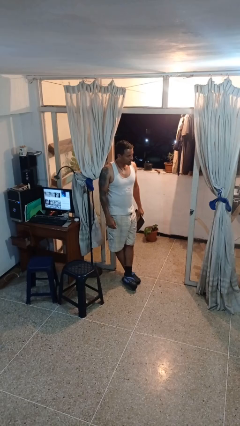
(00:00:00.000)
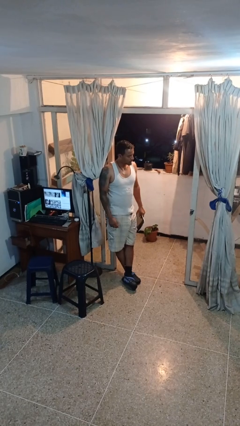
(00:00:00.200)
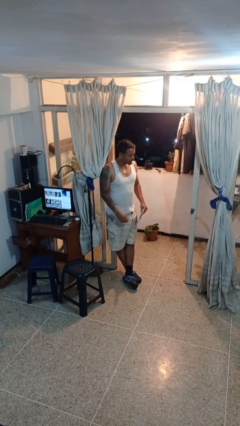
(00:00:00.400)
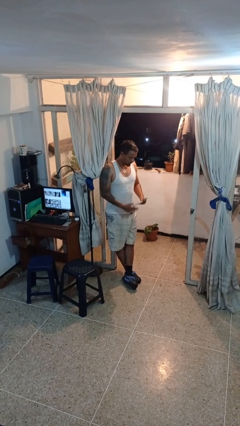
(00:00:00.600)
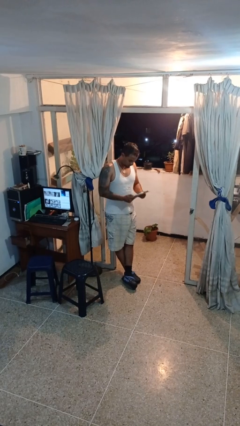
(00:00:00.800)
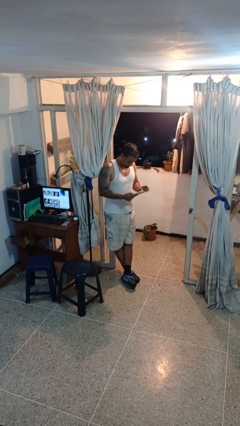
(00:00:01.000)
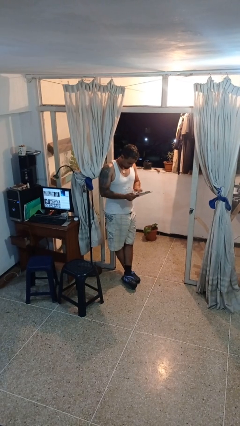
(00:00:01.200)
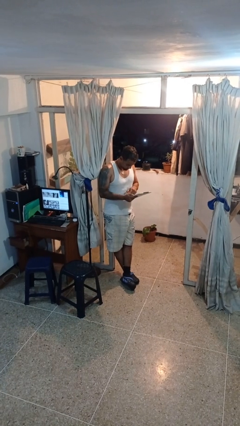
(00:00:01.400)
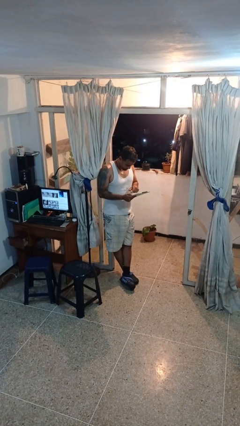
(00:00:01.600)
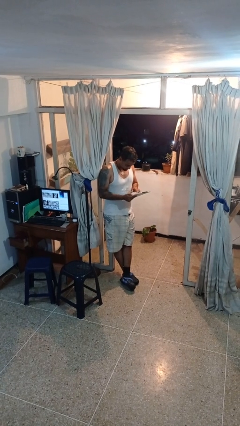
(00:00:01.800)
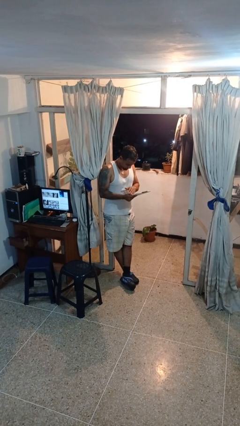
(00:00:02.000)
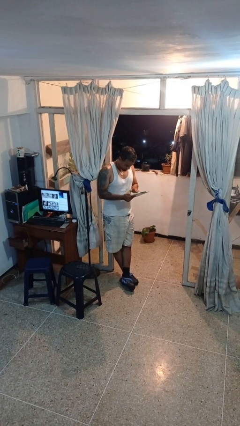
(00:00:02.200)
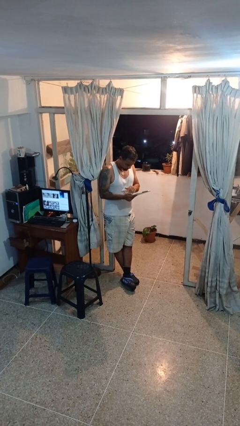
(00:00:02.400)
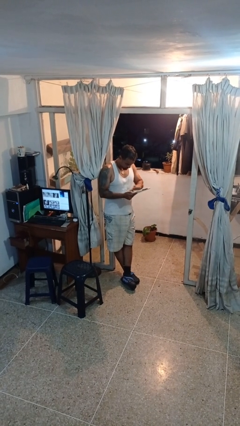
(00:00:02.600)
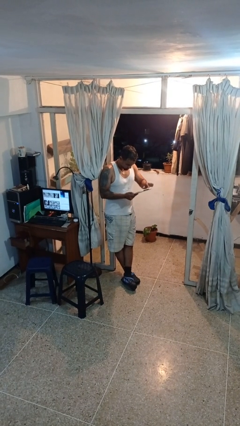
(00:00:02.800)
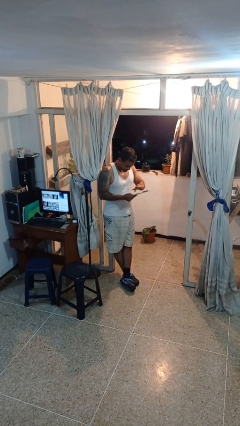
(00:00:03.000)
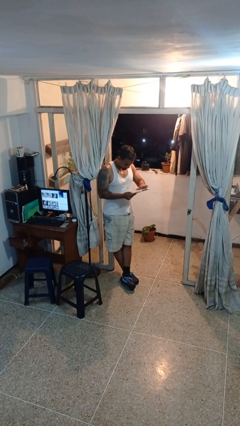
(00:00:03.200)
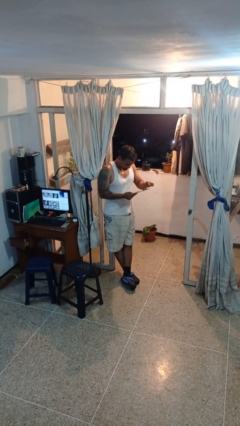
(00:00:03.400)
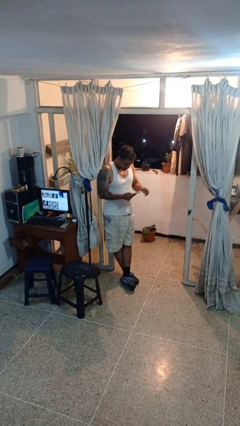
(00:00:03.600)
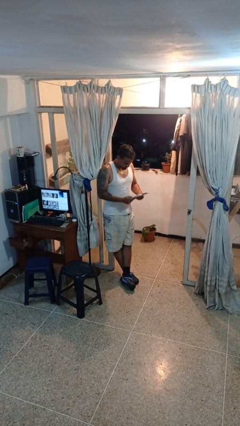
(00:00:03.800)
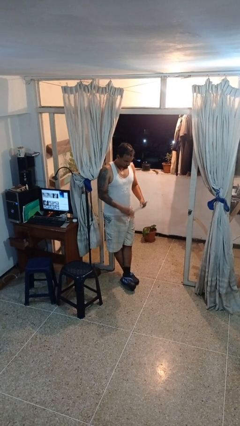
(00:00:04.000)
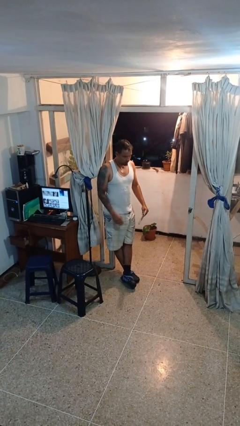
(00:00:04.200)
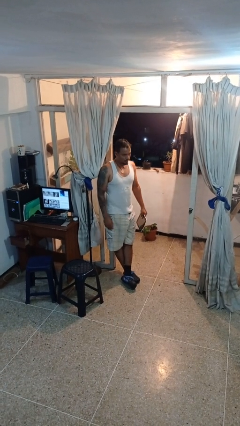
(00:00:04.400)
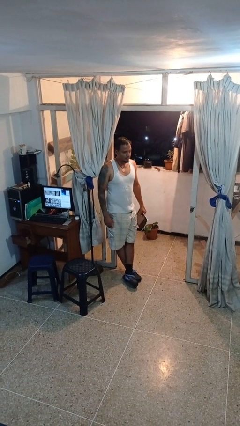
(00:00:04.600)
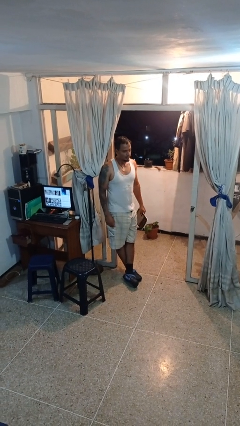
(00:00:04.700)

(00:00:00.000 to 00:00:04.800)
person interacts with tablet

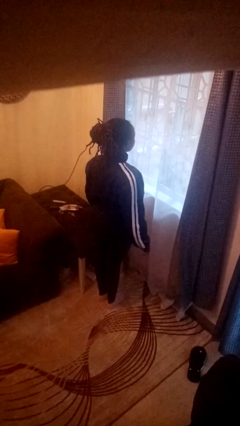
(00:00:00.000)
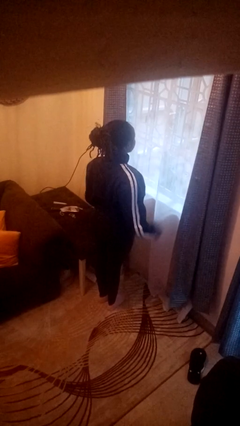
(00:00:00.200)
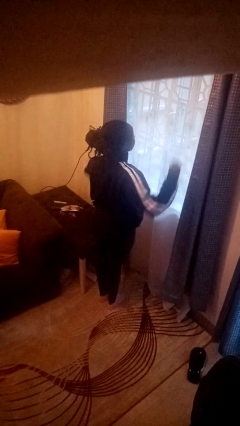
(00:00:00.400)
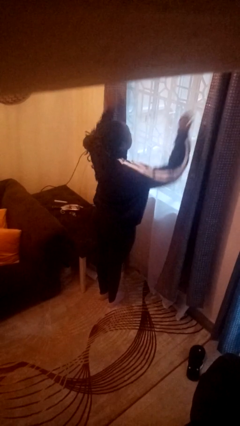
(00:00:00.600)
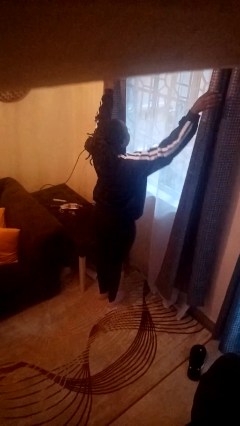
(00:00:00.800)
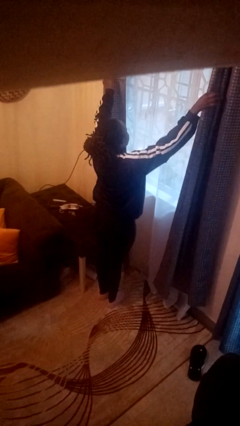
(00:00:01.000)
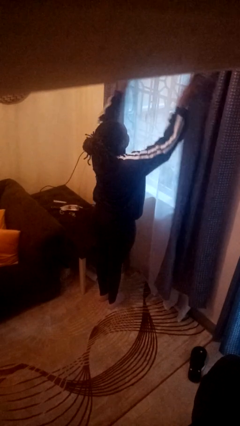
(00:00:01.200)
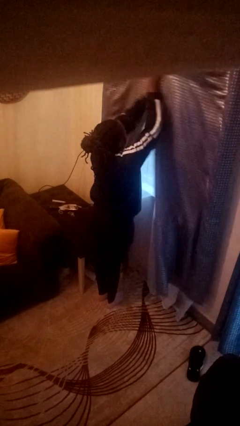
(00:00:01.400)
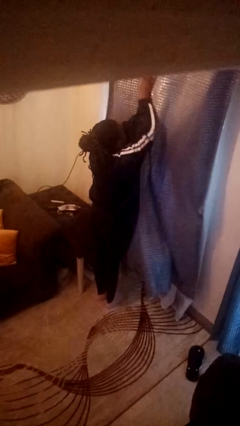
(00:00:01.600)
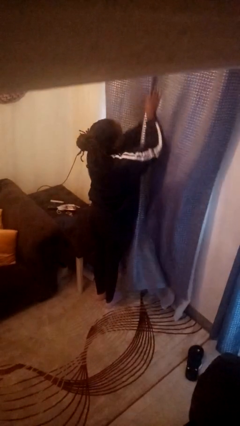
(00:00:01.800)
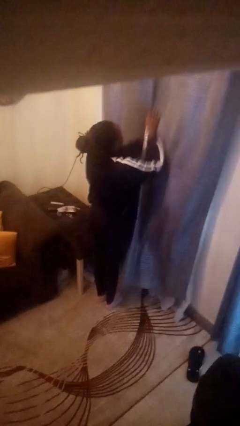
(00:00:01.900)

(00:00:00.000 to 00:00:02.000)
person closes curtains

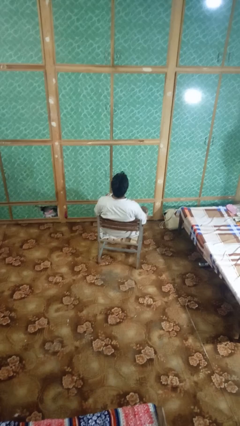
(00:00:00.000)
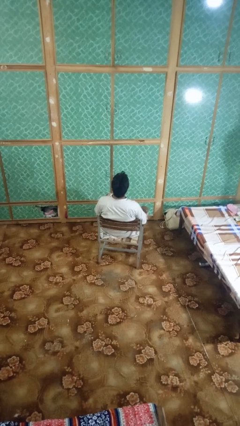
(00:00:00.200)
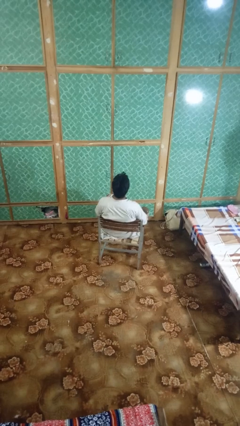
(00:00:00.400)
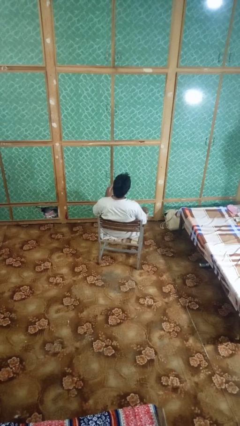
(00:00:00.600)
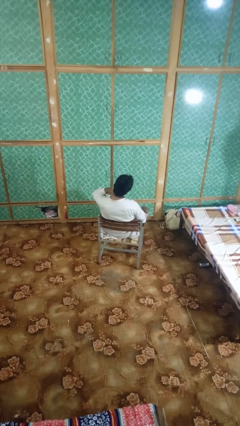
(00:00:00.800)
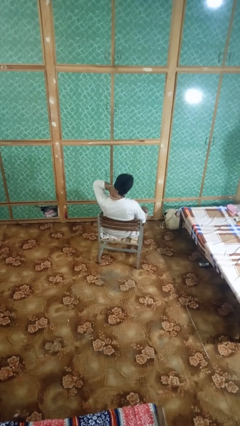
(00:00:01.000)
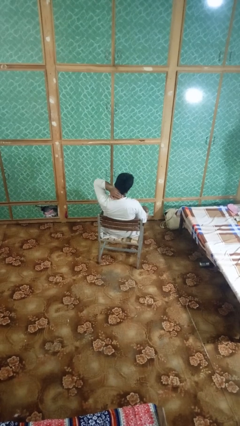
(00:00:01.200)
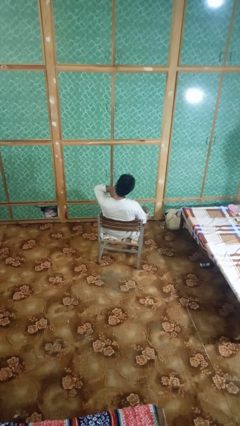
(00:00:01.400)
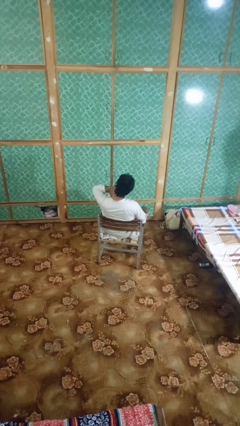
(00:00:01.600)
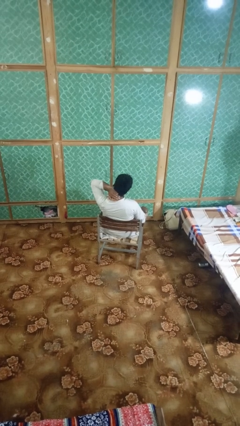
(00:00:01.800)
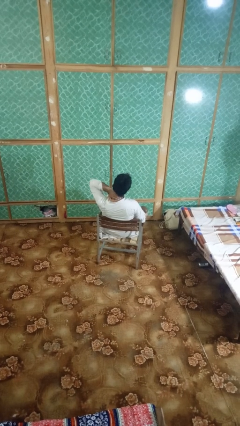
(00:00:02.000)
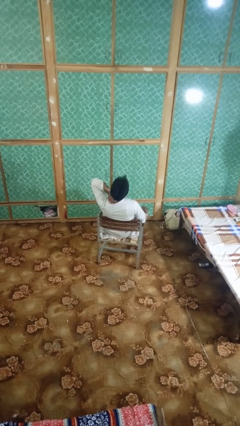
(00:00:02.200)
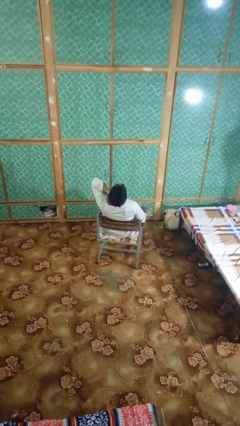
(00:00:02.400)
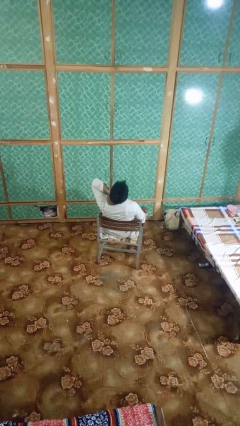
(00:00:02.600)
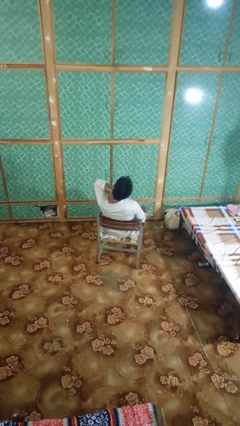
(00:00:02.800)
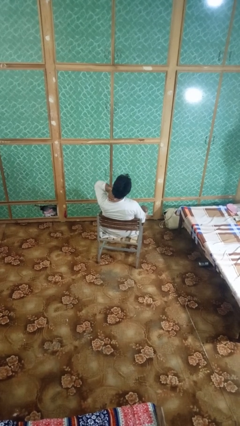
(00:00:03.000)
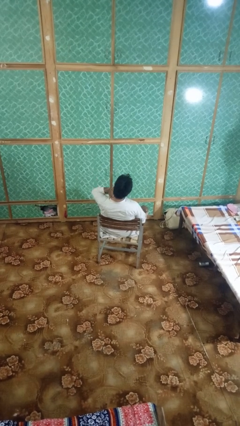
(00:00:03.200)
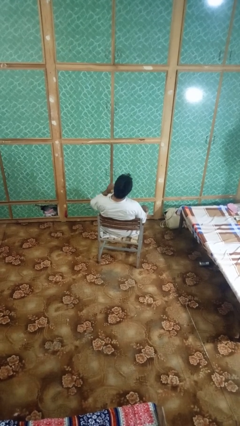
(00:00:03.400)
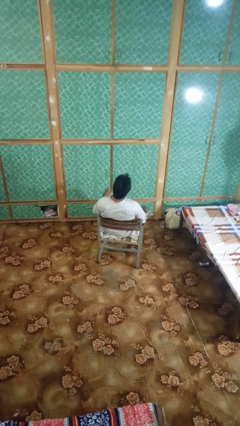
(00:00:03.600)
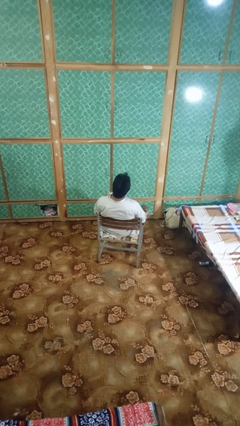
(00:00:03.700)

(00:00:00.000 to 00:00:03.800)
person rubs neck

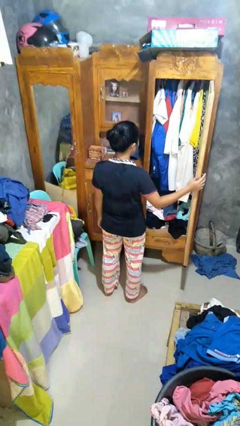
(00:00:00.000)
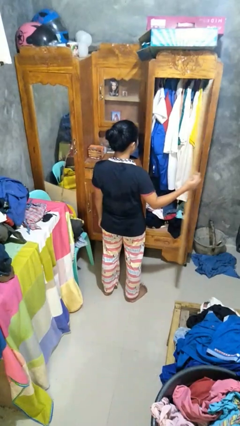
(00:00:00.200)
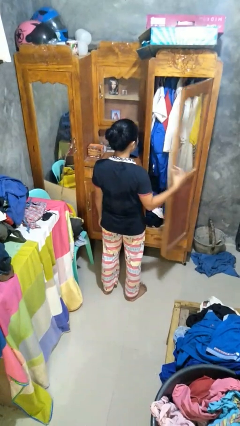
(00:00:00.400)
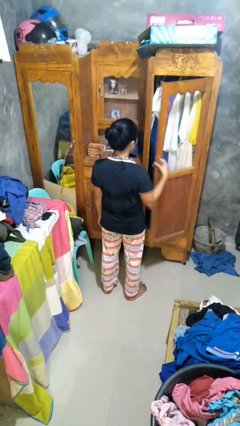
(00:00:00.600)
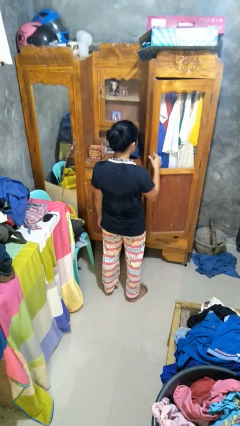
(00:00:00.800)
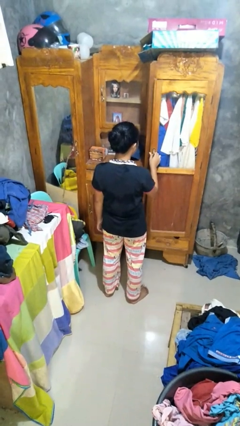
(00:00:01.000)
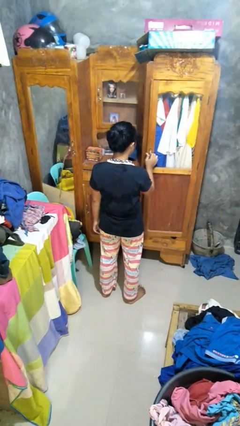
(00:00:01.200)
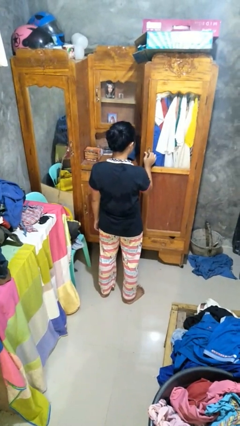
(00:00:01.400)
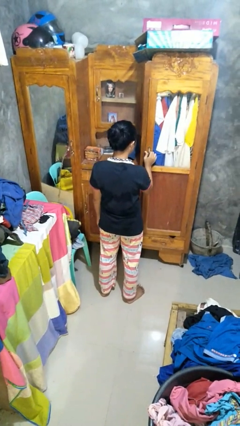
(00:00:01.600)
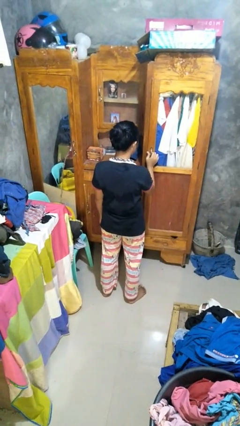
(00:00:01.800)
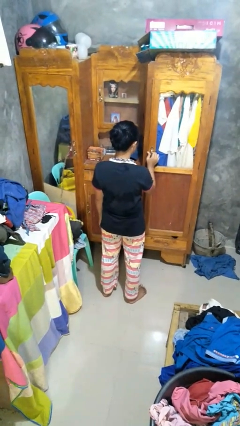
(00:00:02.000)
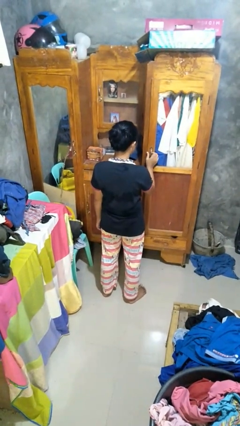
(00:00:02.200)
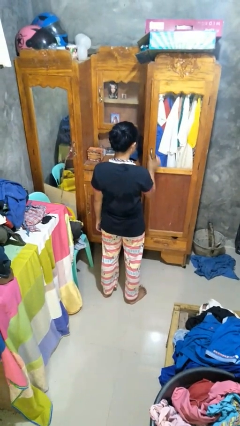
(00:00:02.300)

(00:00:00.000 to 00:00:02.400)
person closes closet door

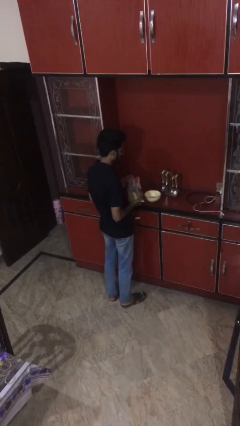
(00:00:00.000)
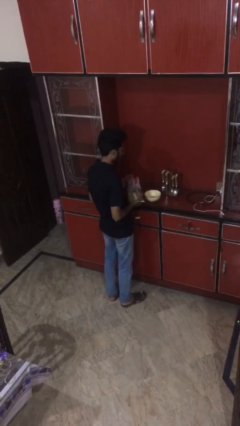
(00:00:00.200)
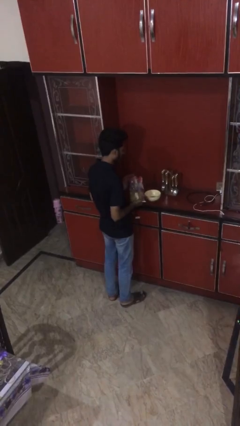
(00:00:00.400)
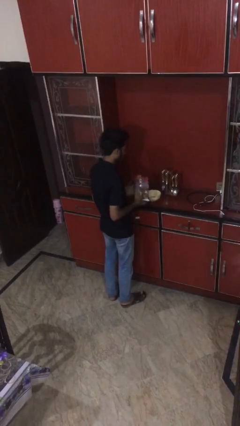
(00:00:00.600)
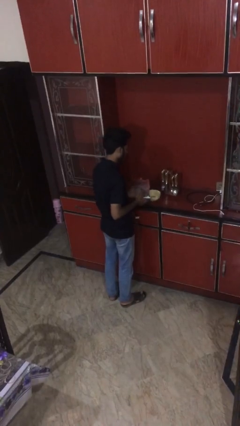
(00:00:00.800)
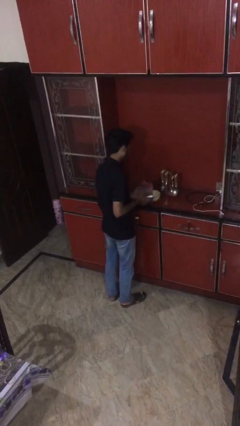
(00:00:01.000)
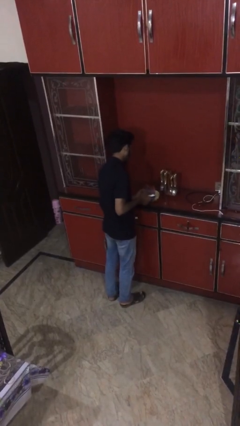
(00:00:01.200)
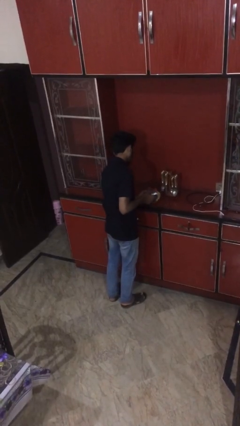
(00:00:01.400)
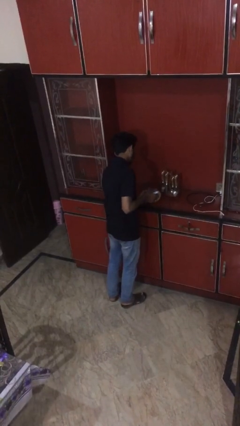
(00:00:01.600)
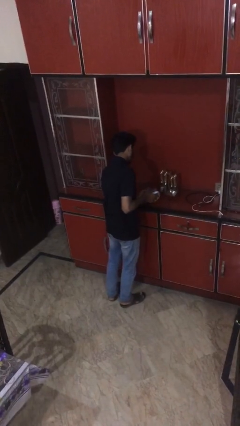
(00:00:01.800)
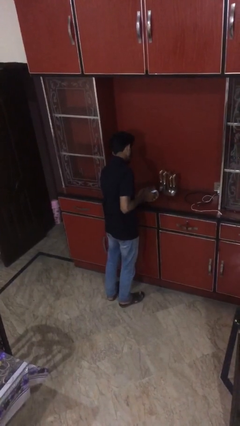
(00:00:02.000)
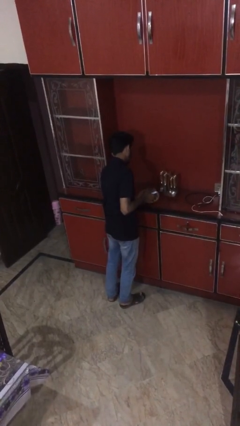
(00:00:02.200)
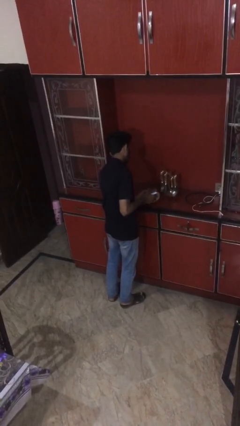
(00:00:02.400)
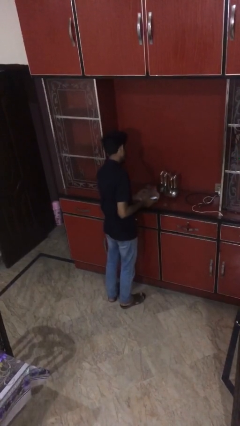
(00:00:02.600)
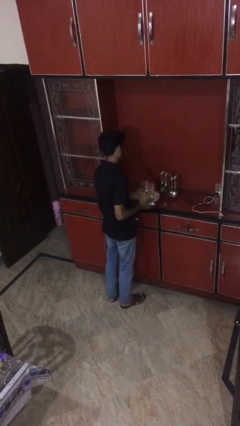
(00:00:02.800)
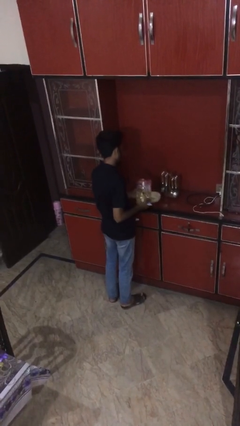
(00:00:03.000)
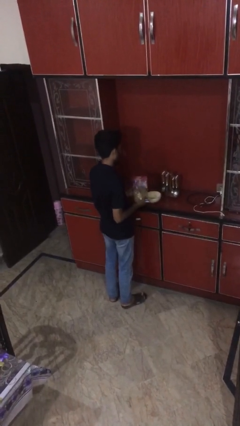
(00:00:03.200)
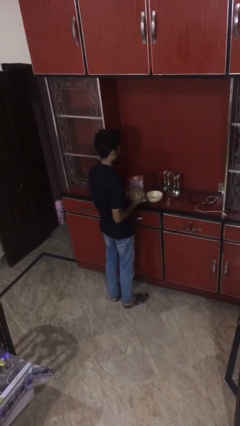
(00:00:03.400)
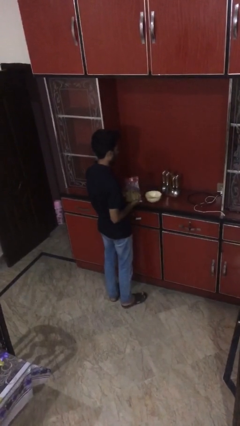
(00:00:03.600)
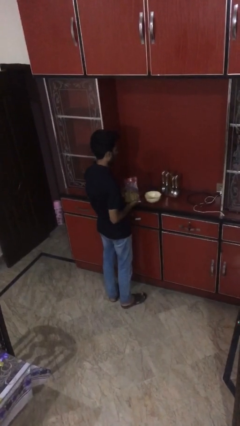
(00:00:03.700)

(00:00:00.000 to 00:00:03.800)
person pours into bowl

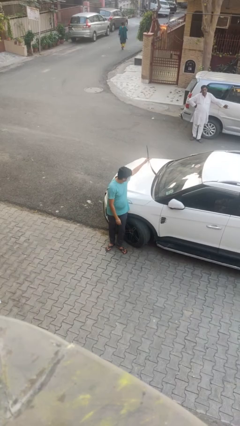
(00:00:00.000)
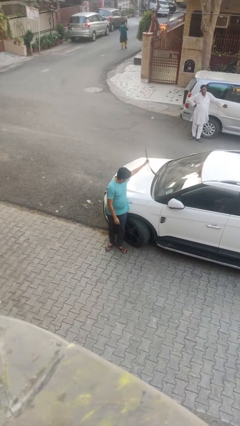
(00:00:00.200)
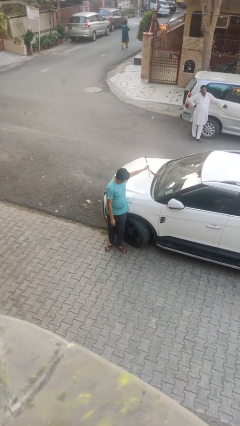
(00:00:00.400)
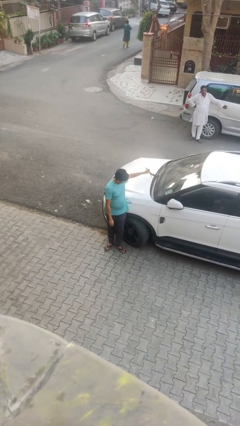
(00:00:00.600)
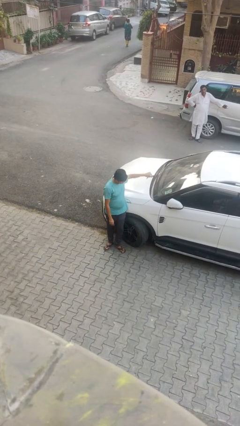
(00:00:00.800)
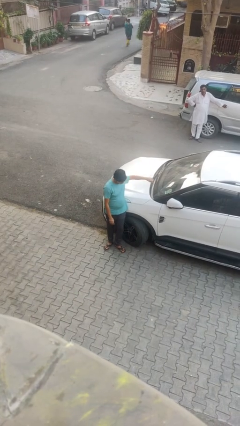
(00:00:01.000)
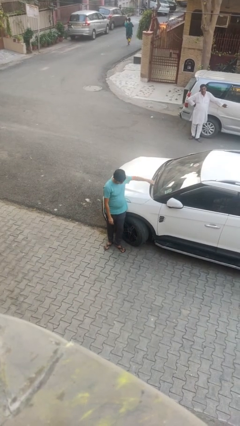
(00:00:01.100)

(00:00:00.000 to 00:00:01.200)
person flips down car wipers
